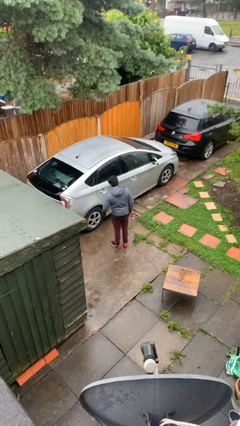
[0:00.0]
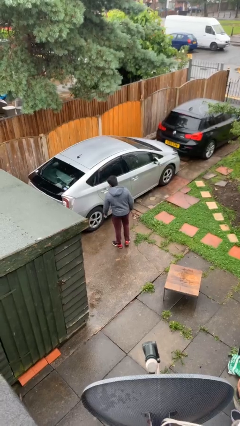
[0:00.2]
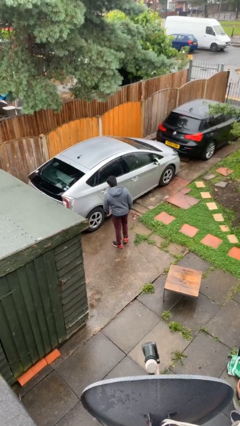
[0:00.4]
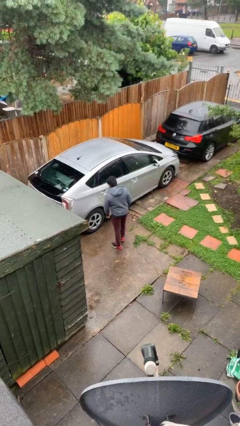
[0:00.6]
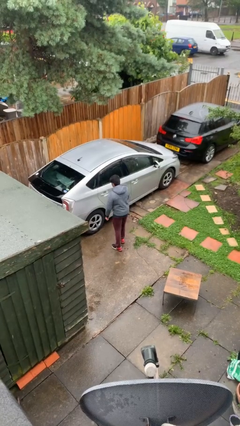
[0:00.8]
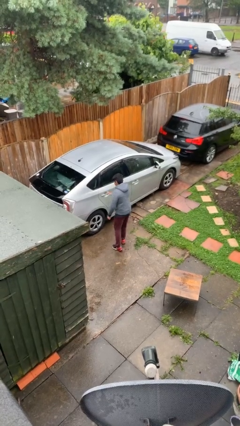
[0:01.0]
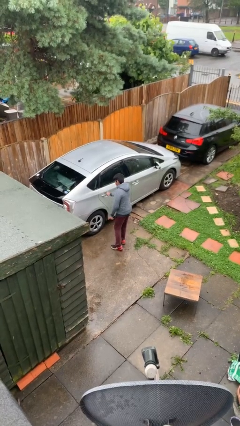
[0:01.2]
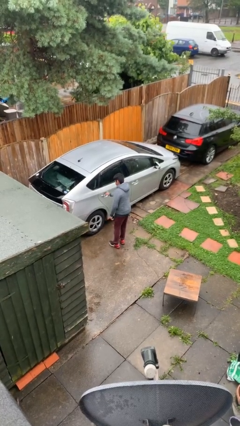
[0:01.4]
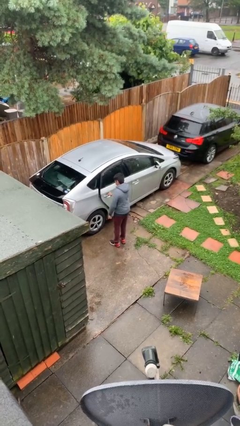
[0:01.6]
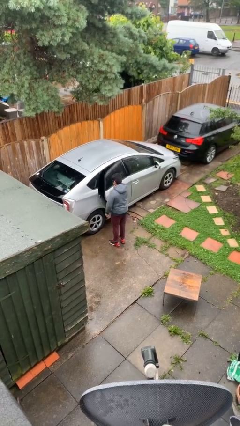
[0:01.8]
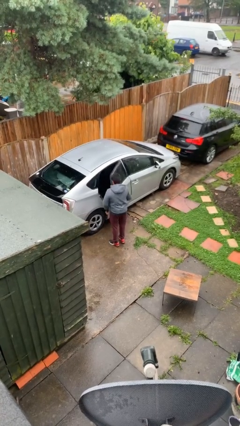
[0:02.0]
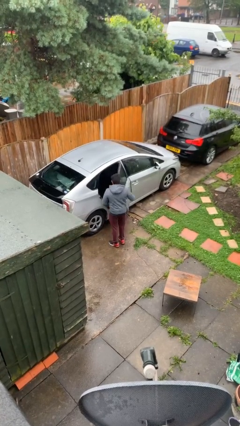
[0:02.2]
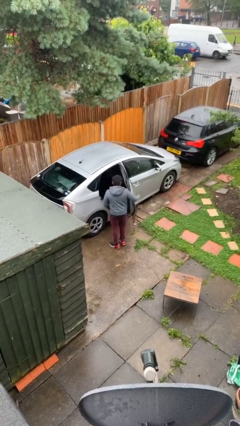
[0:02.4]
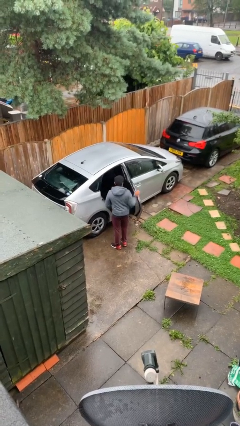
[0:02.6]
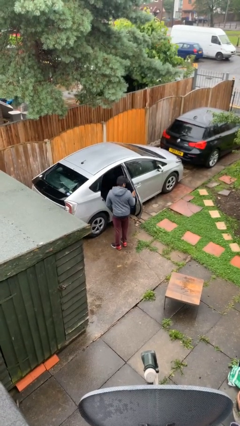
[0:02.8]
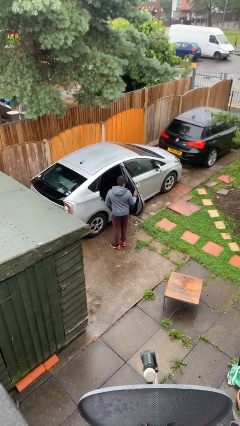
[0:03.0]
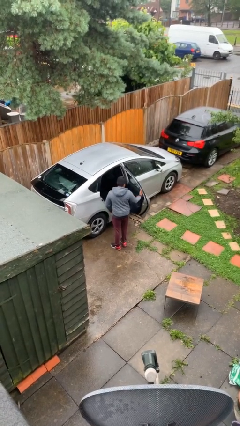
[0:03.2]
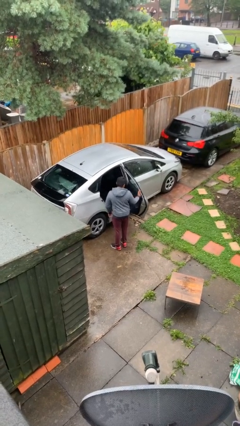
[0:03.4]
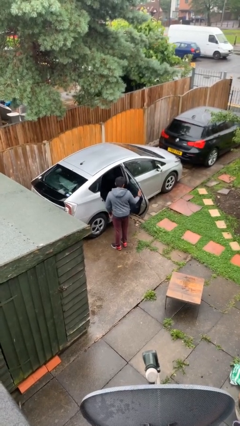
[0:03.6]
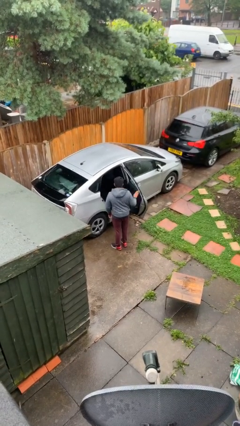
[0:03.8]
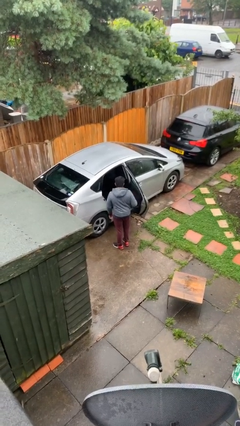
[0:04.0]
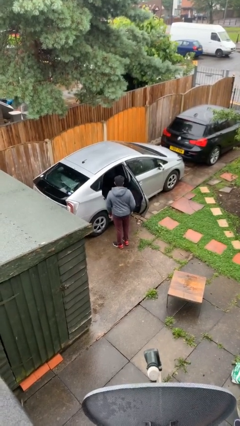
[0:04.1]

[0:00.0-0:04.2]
person opens car door

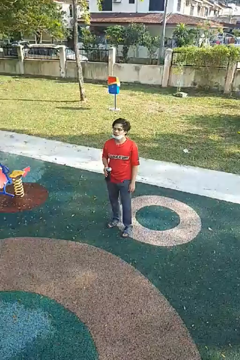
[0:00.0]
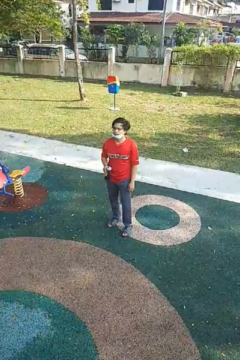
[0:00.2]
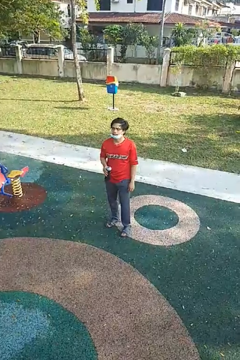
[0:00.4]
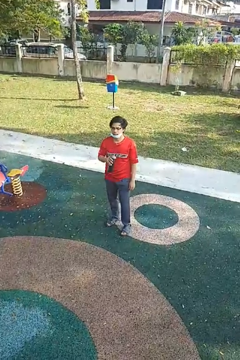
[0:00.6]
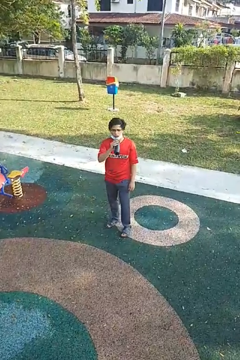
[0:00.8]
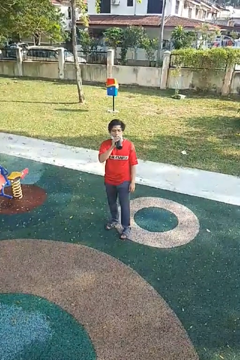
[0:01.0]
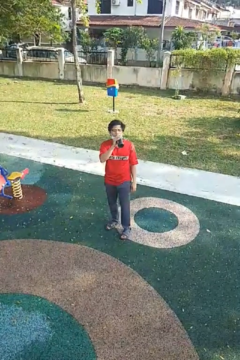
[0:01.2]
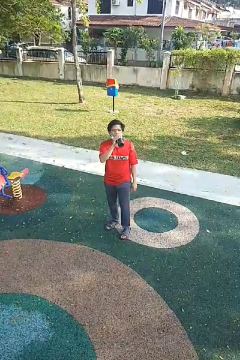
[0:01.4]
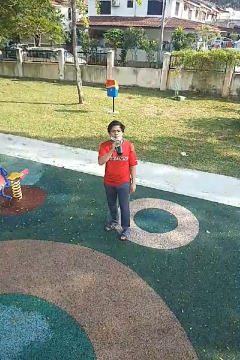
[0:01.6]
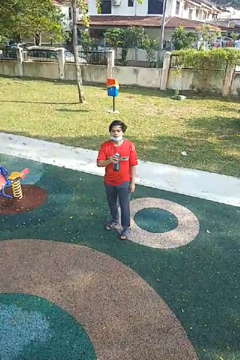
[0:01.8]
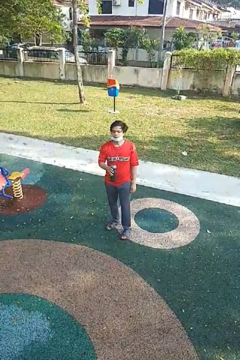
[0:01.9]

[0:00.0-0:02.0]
person drinks from bottle

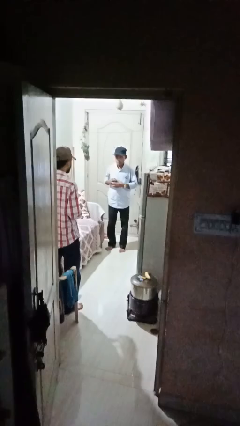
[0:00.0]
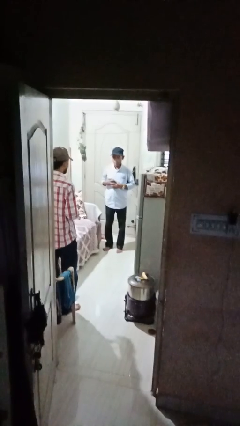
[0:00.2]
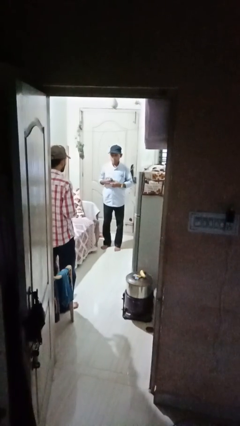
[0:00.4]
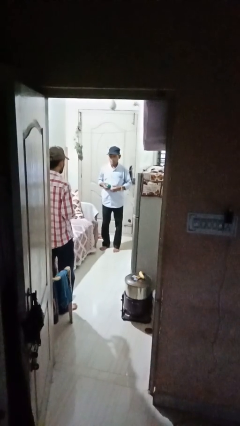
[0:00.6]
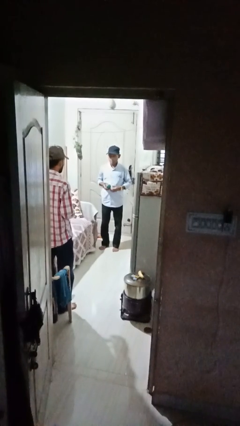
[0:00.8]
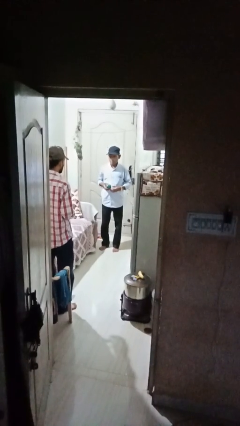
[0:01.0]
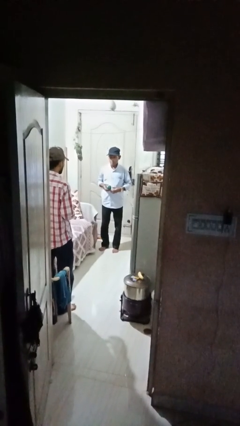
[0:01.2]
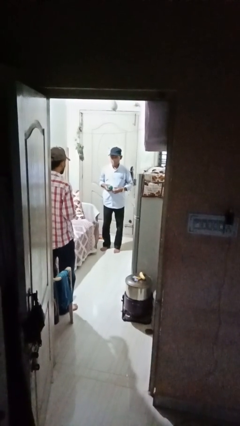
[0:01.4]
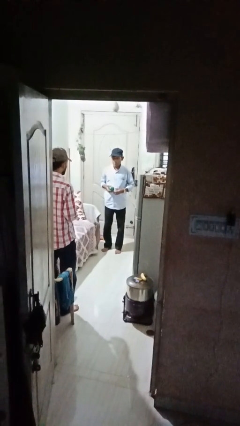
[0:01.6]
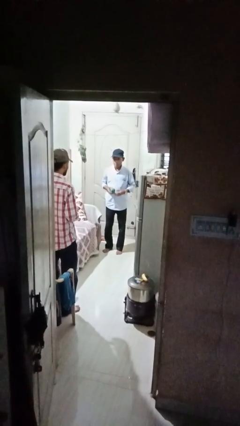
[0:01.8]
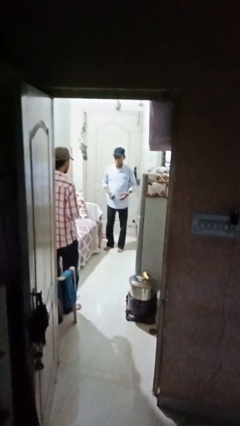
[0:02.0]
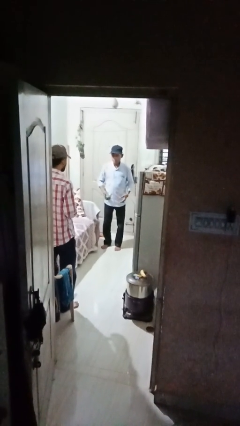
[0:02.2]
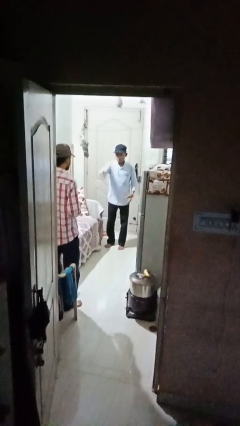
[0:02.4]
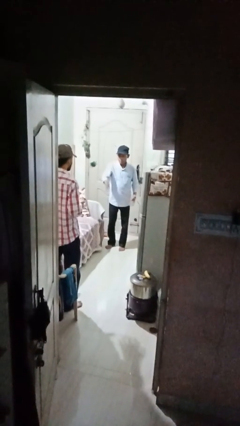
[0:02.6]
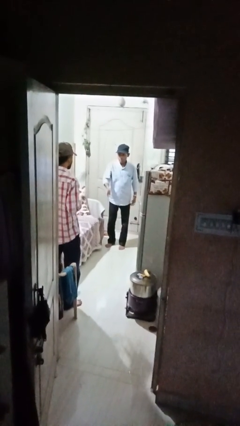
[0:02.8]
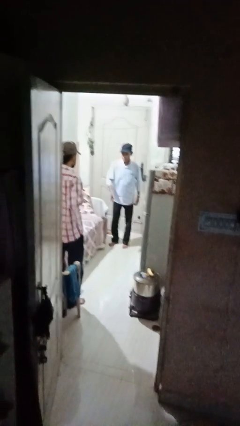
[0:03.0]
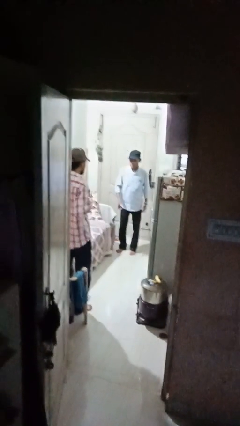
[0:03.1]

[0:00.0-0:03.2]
person catches object from person

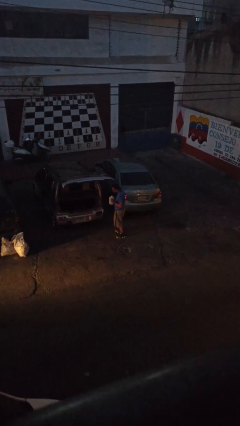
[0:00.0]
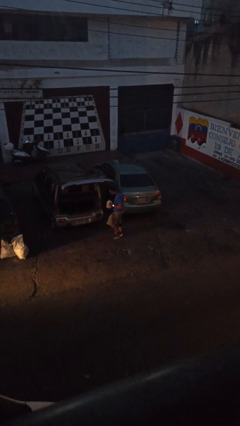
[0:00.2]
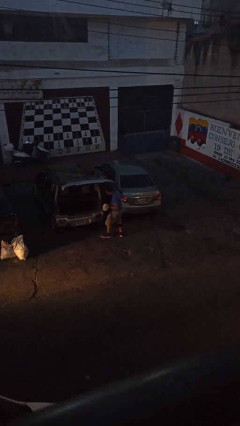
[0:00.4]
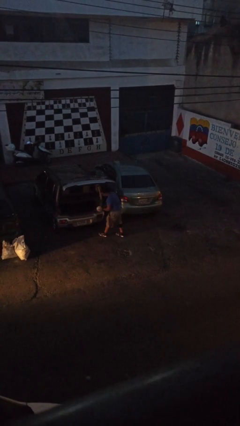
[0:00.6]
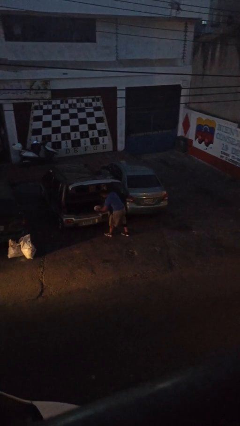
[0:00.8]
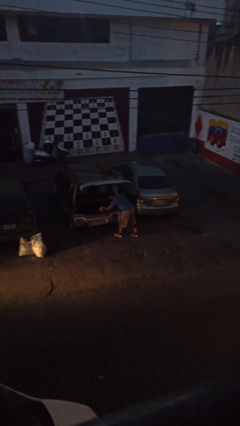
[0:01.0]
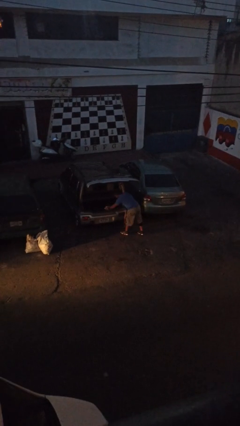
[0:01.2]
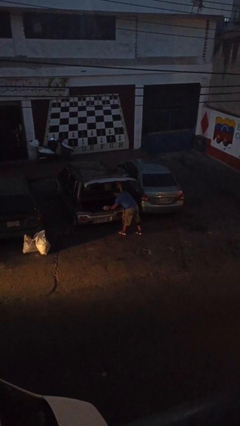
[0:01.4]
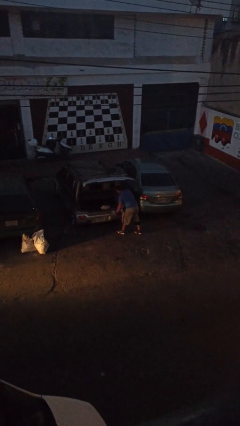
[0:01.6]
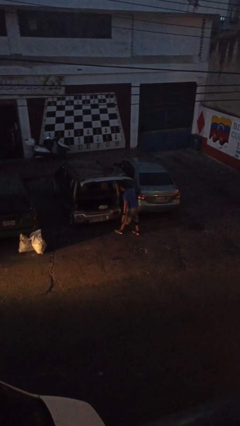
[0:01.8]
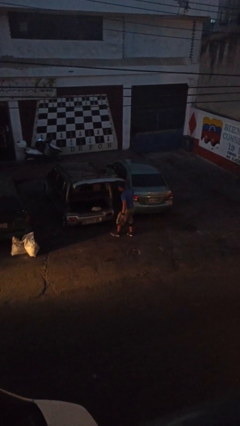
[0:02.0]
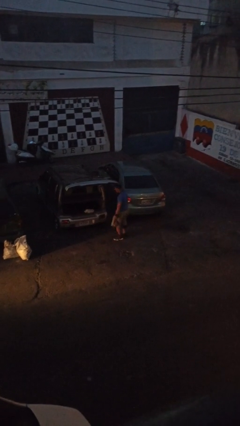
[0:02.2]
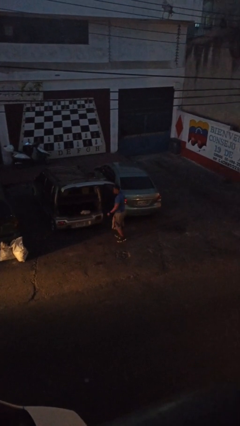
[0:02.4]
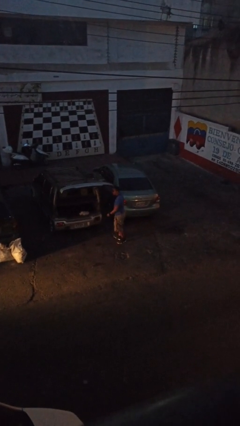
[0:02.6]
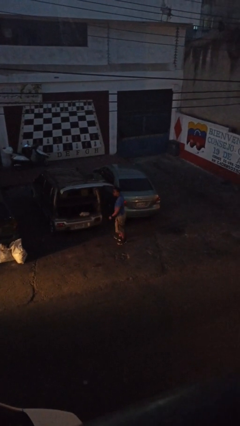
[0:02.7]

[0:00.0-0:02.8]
person loads car

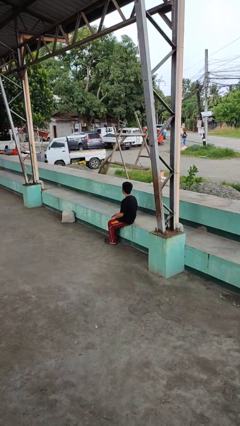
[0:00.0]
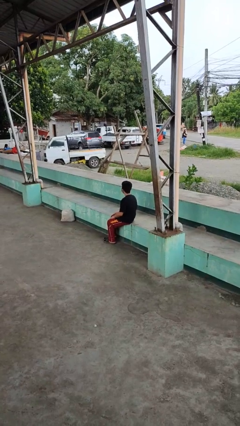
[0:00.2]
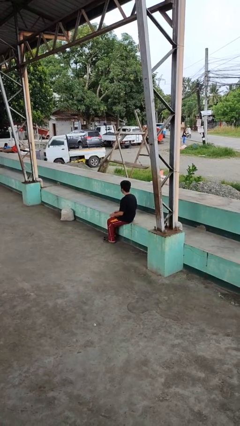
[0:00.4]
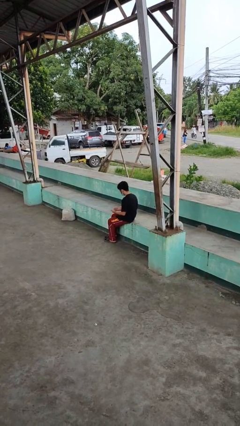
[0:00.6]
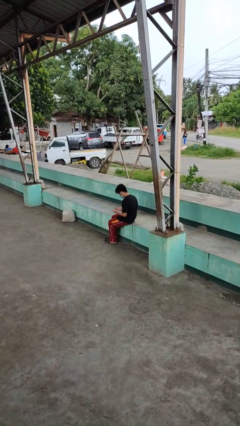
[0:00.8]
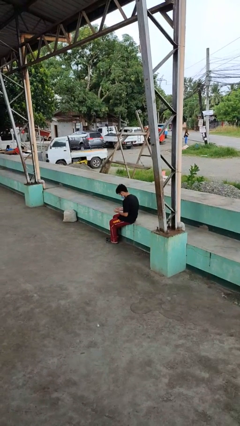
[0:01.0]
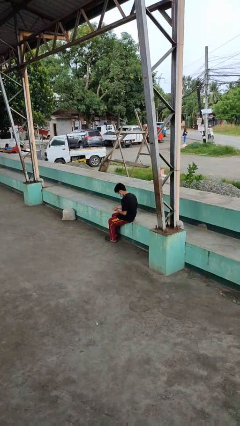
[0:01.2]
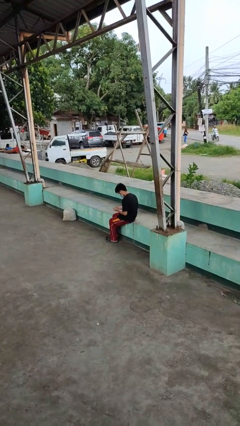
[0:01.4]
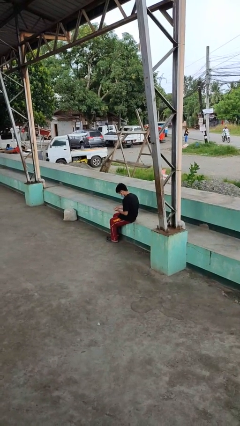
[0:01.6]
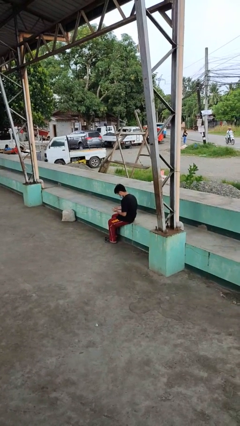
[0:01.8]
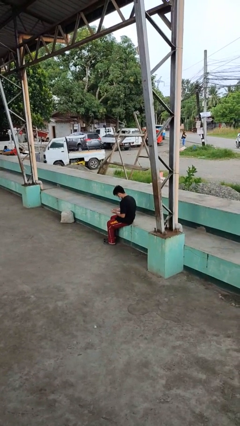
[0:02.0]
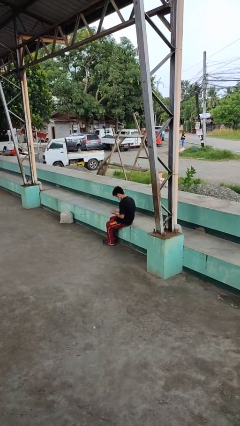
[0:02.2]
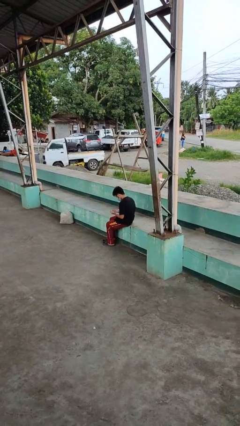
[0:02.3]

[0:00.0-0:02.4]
person looks at hands in lap

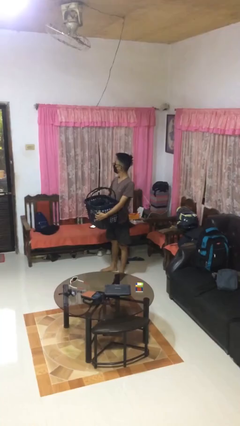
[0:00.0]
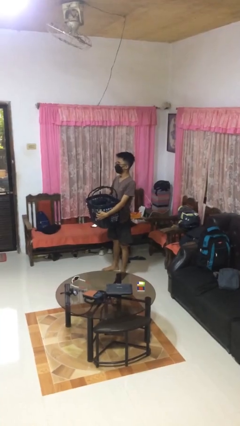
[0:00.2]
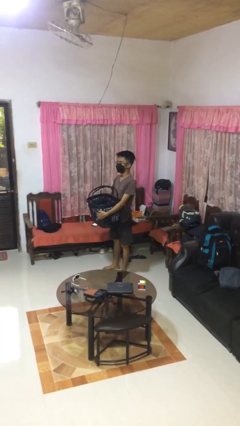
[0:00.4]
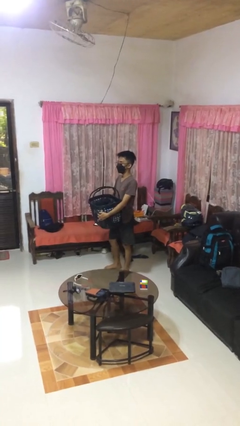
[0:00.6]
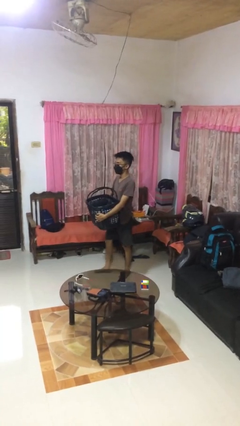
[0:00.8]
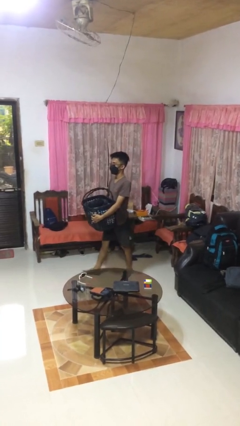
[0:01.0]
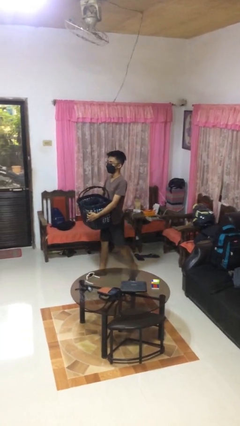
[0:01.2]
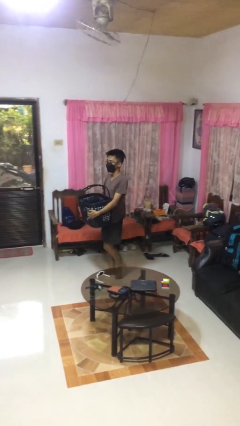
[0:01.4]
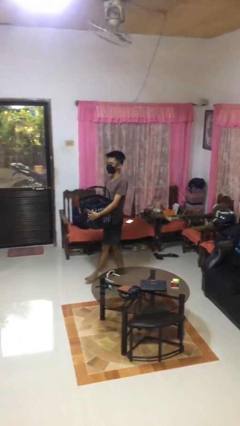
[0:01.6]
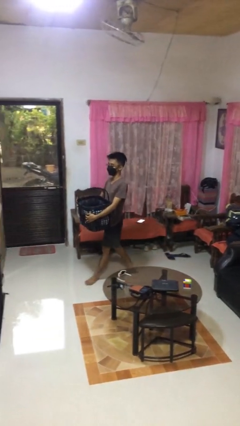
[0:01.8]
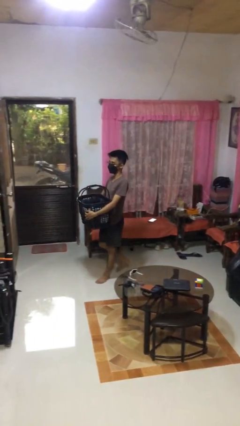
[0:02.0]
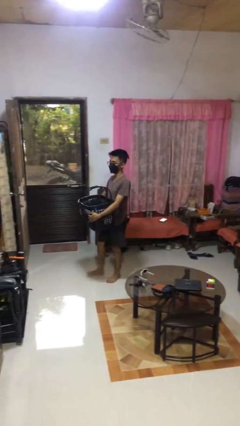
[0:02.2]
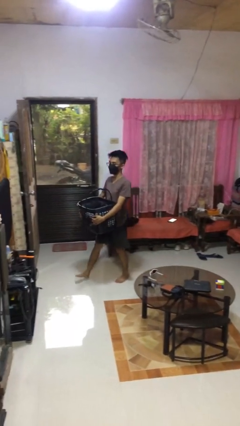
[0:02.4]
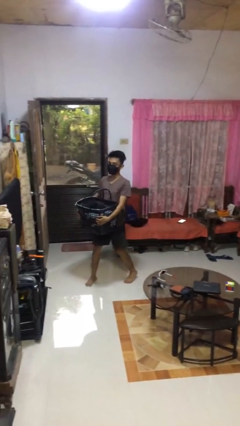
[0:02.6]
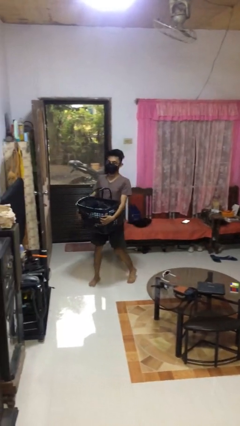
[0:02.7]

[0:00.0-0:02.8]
person carries laundry basket

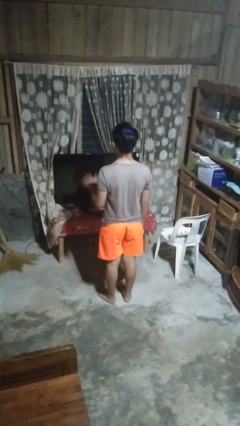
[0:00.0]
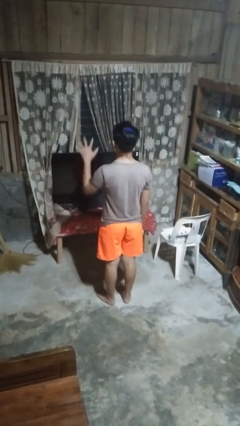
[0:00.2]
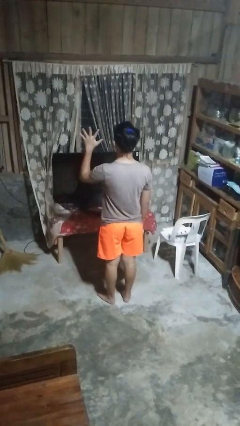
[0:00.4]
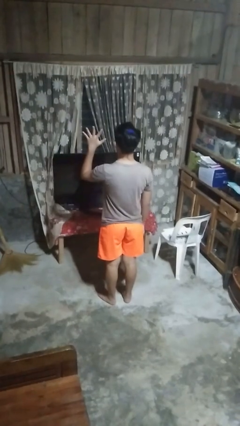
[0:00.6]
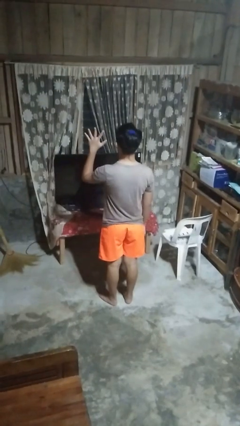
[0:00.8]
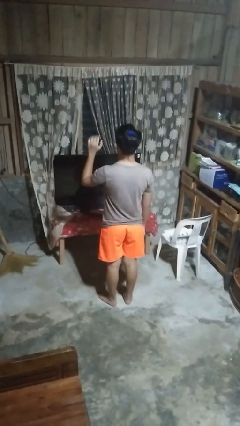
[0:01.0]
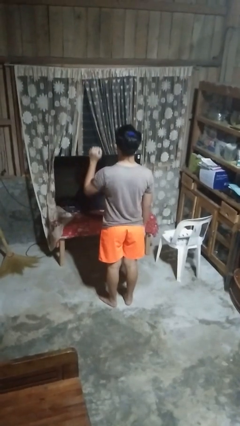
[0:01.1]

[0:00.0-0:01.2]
person gestures number five
